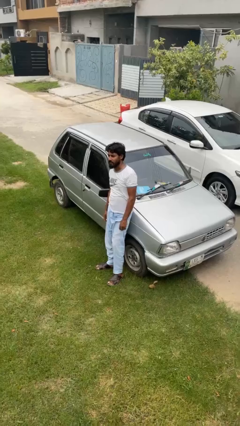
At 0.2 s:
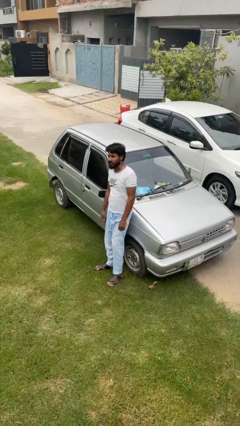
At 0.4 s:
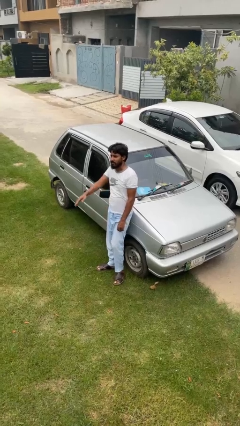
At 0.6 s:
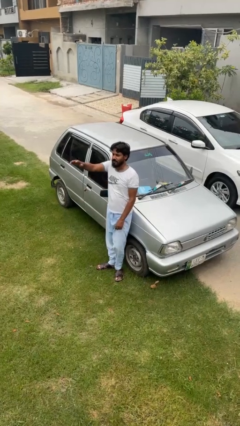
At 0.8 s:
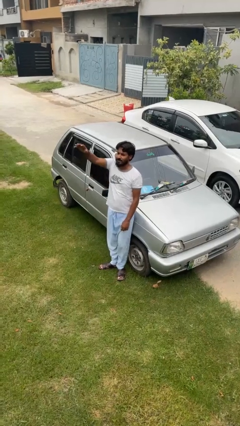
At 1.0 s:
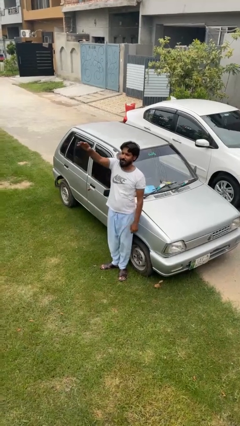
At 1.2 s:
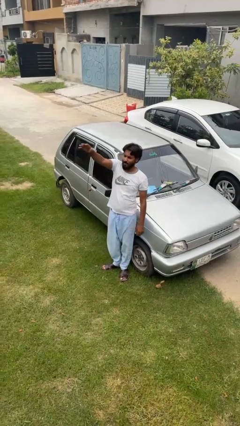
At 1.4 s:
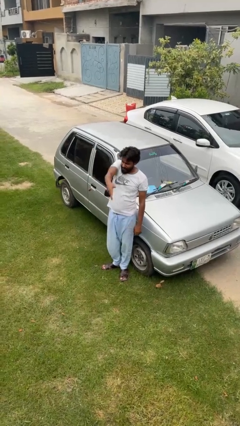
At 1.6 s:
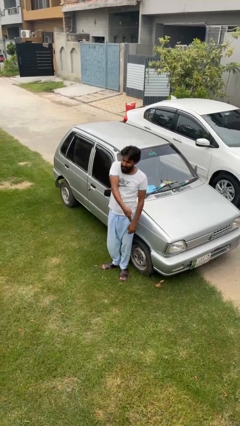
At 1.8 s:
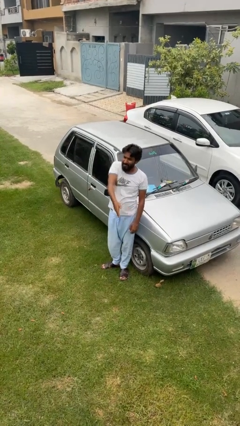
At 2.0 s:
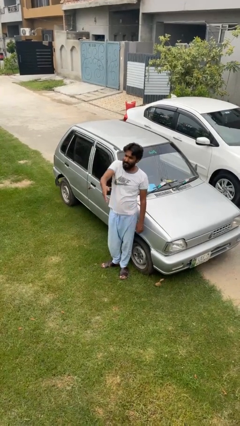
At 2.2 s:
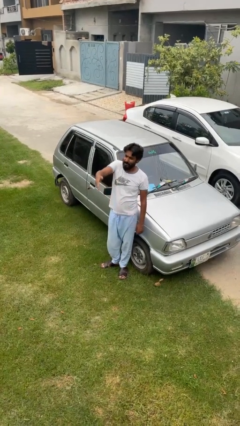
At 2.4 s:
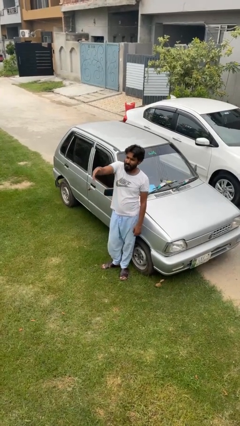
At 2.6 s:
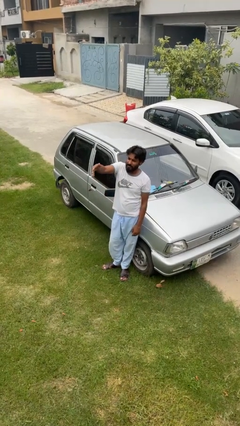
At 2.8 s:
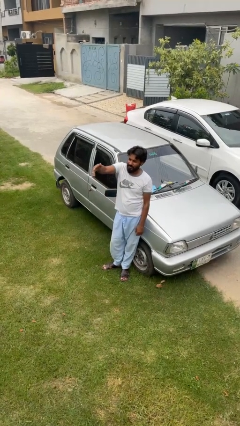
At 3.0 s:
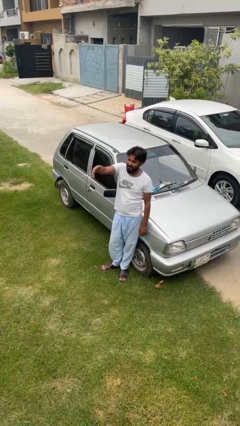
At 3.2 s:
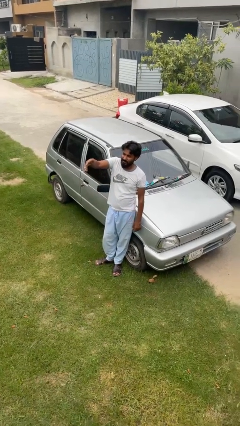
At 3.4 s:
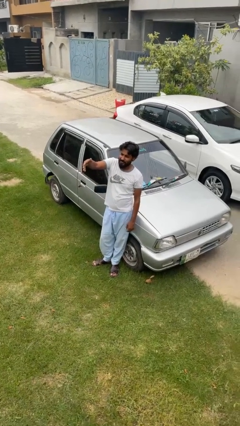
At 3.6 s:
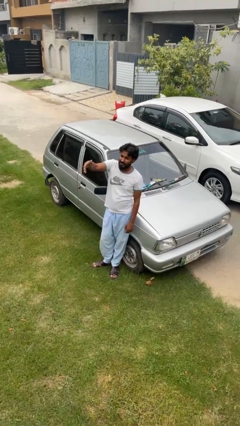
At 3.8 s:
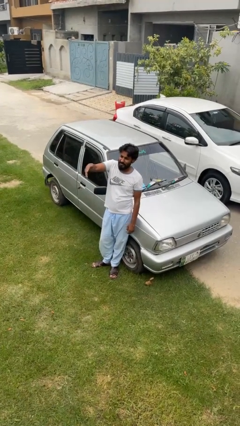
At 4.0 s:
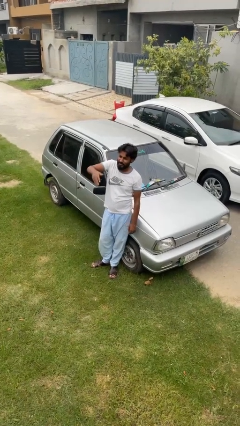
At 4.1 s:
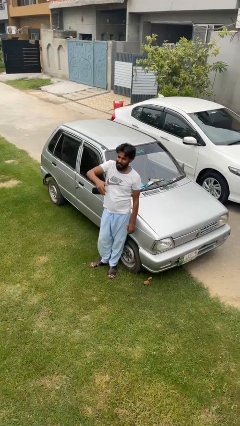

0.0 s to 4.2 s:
person gestures come here

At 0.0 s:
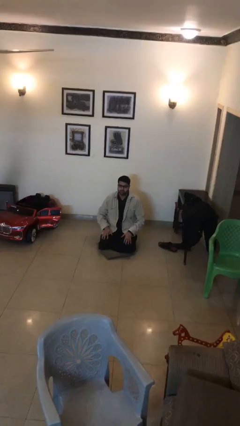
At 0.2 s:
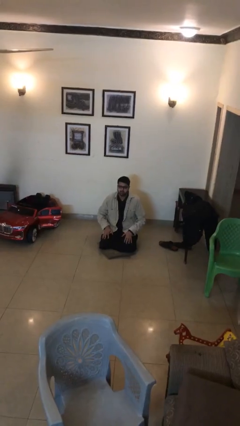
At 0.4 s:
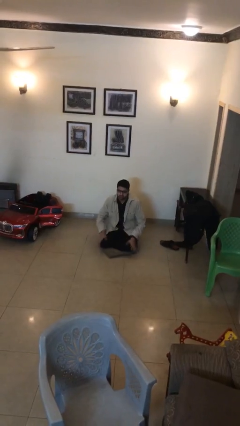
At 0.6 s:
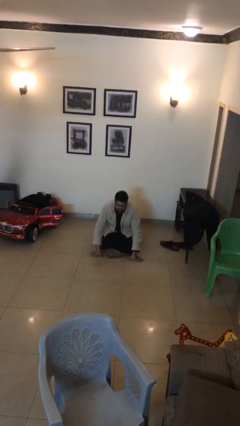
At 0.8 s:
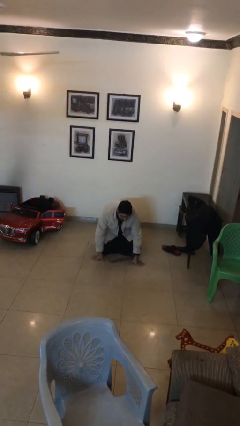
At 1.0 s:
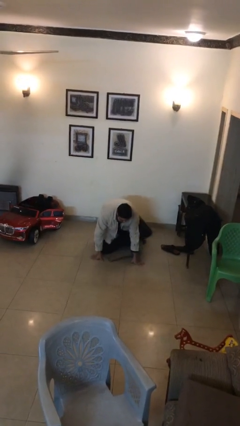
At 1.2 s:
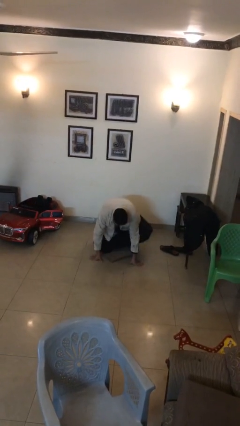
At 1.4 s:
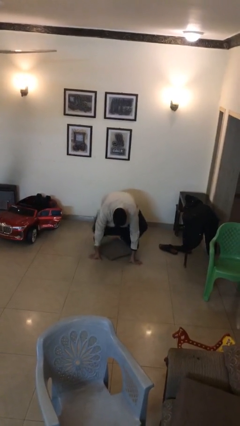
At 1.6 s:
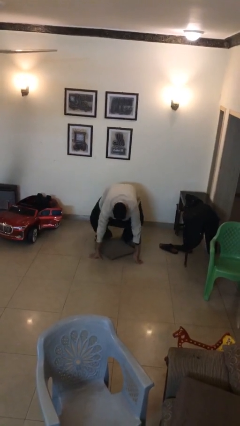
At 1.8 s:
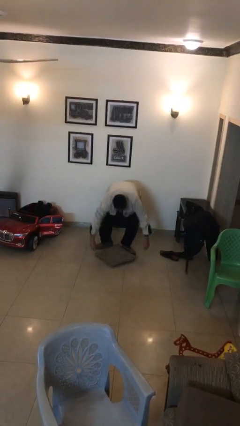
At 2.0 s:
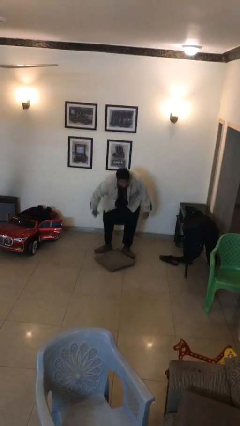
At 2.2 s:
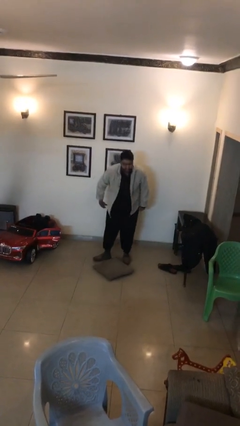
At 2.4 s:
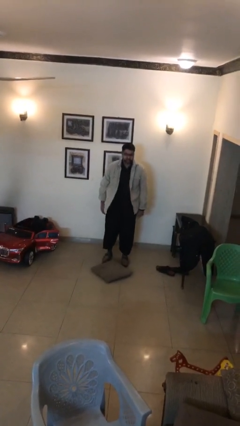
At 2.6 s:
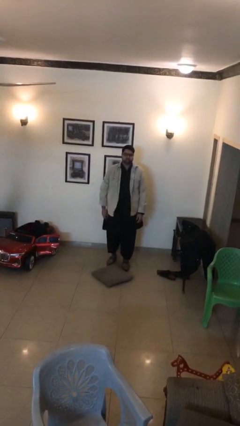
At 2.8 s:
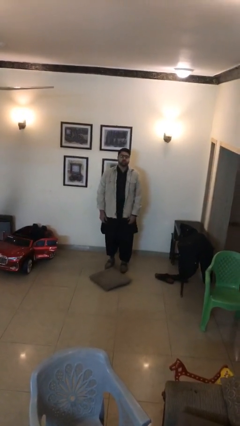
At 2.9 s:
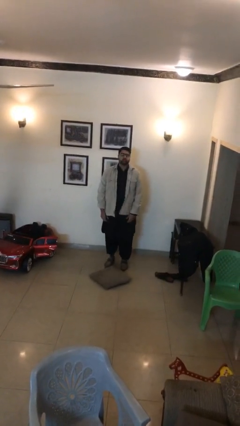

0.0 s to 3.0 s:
person stands up

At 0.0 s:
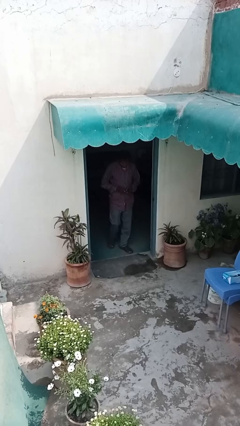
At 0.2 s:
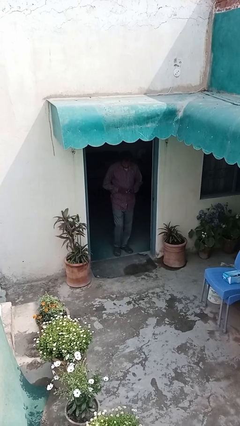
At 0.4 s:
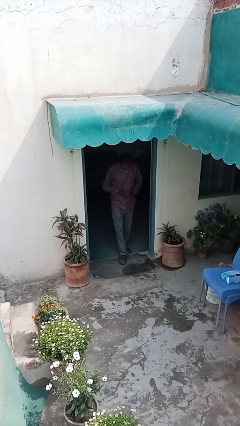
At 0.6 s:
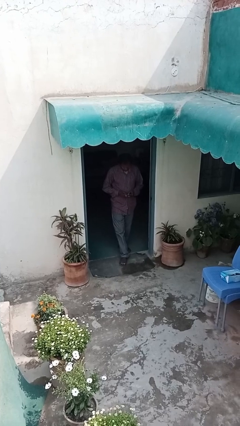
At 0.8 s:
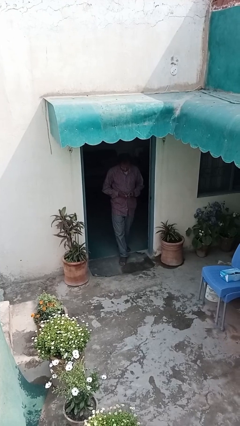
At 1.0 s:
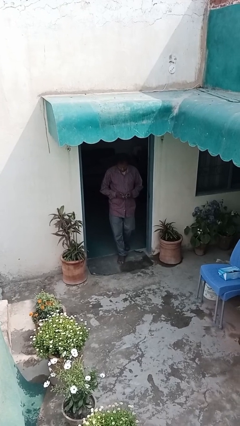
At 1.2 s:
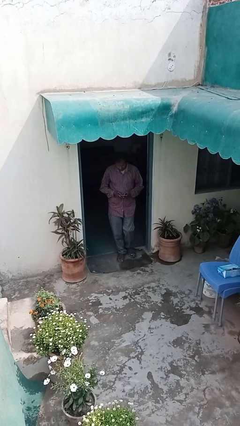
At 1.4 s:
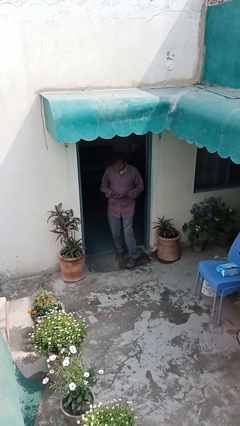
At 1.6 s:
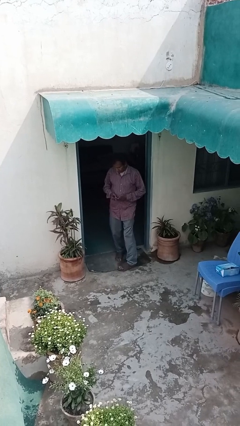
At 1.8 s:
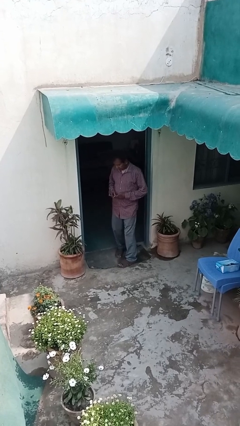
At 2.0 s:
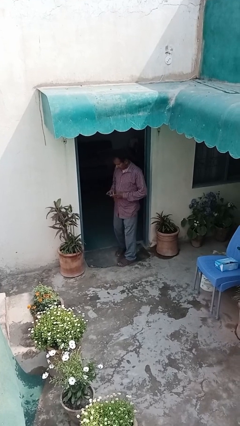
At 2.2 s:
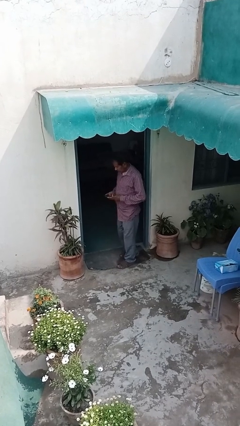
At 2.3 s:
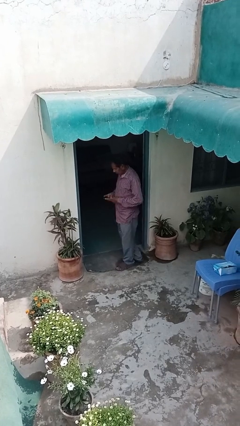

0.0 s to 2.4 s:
person enters scene through structure

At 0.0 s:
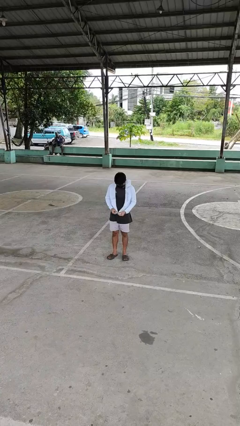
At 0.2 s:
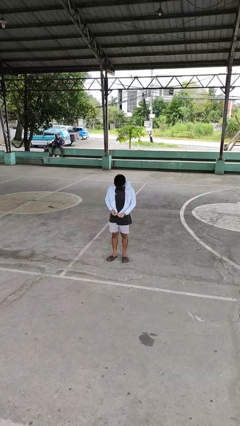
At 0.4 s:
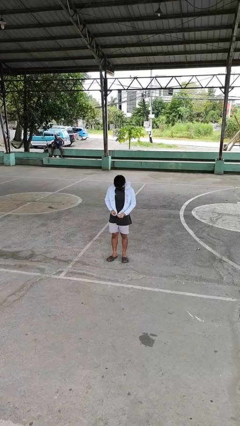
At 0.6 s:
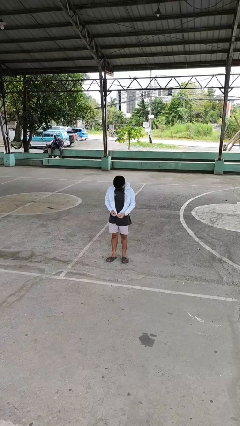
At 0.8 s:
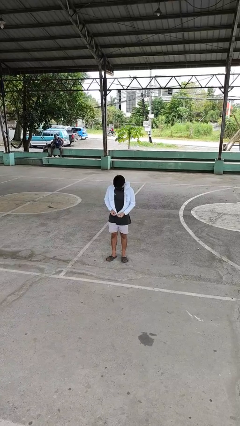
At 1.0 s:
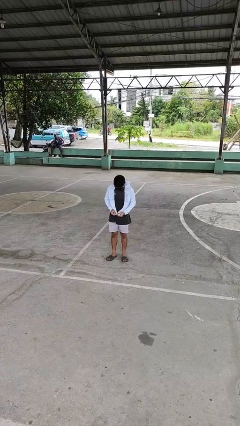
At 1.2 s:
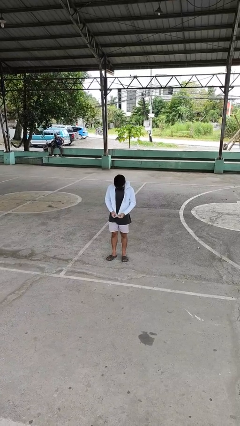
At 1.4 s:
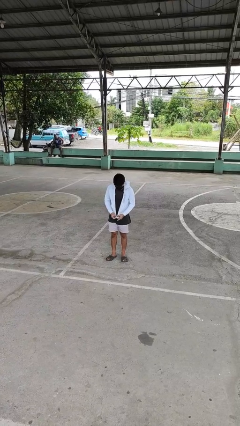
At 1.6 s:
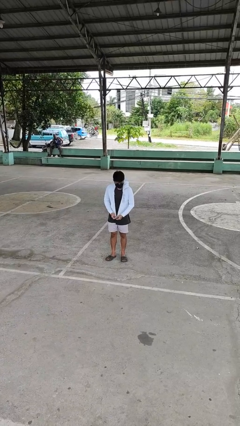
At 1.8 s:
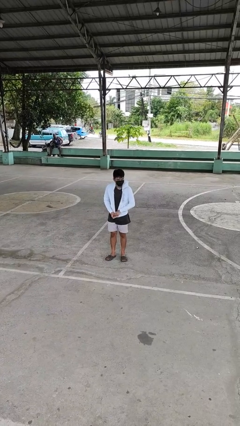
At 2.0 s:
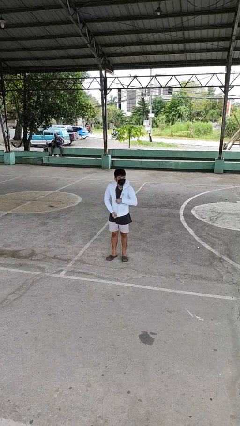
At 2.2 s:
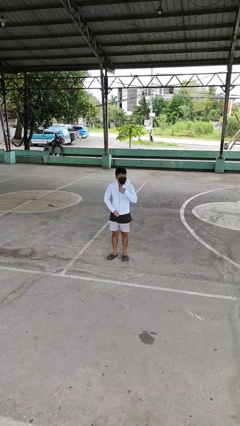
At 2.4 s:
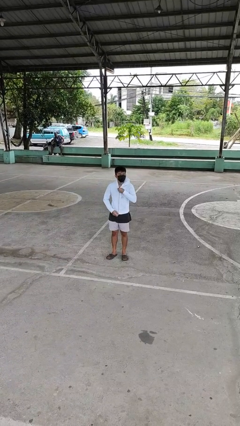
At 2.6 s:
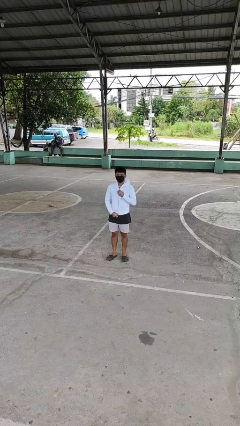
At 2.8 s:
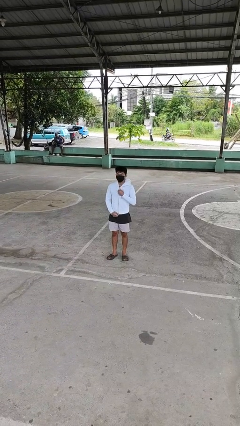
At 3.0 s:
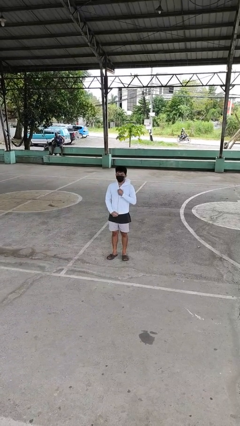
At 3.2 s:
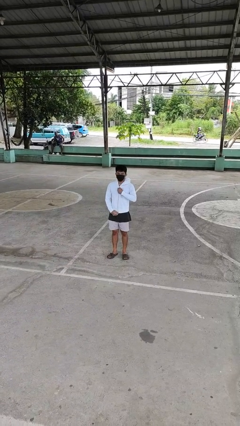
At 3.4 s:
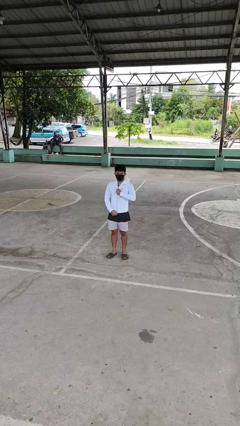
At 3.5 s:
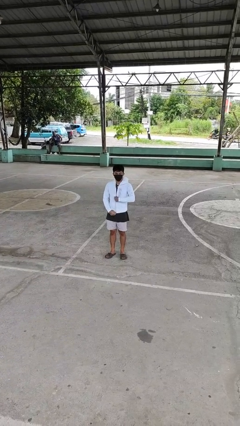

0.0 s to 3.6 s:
person zips up jacket

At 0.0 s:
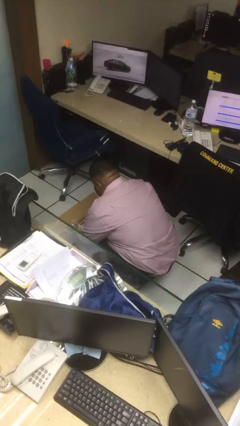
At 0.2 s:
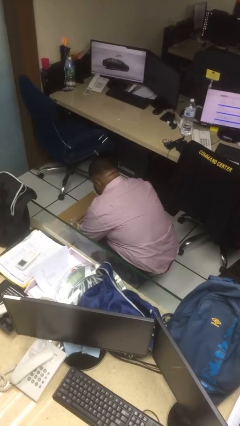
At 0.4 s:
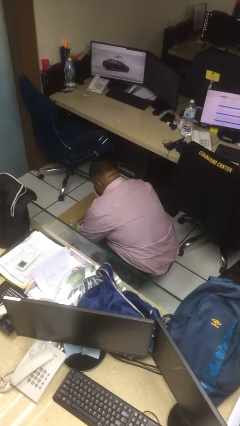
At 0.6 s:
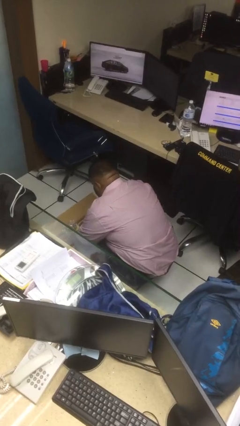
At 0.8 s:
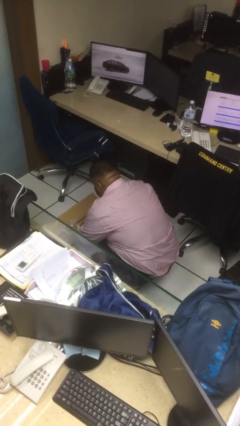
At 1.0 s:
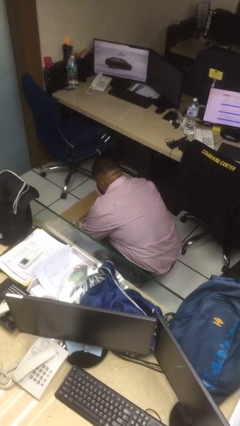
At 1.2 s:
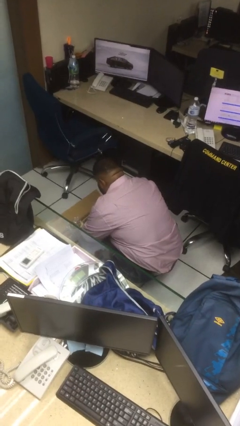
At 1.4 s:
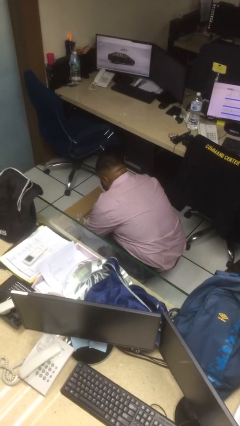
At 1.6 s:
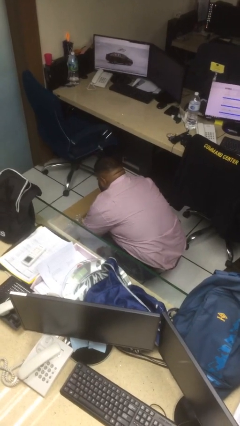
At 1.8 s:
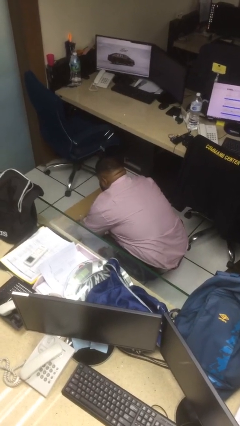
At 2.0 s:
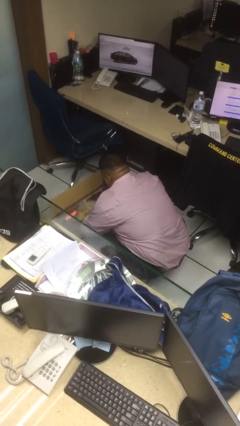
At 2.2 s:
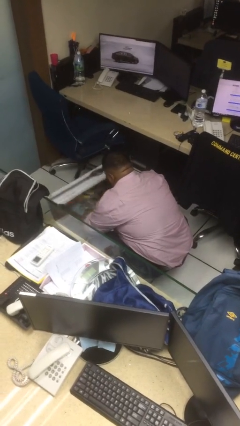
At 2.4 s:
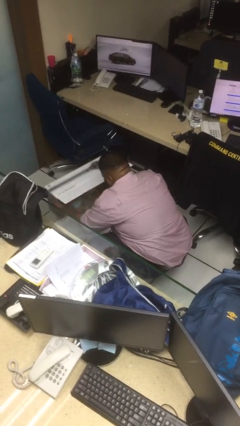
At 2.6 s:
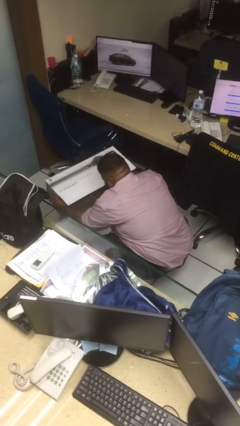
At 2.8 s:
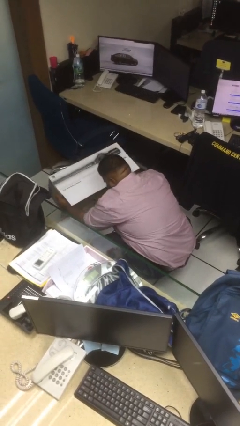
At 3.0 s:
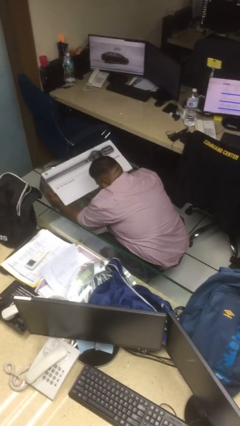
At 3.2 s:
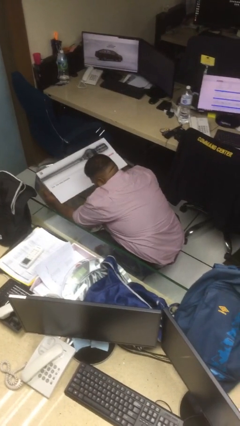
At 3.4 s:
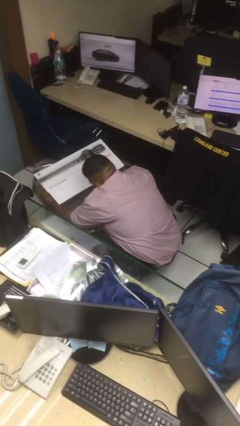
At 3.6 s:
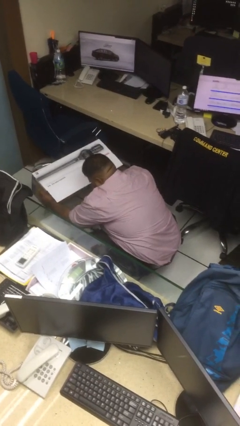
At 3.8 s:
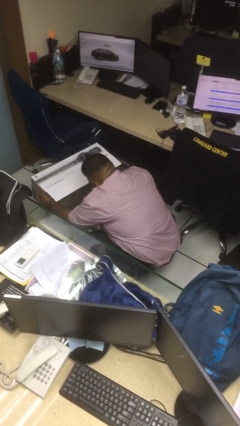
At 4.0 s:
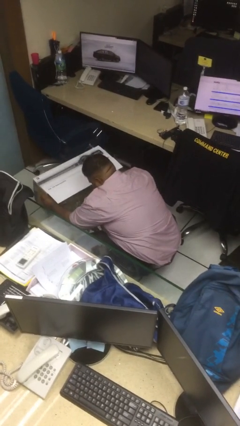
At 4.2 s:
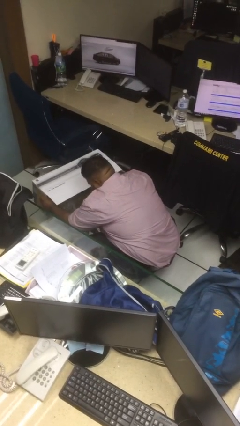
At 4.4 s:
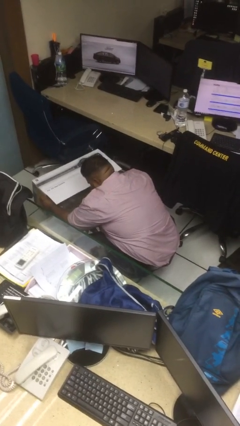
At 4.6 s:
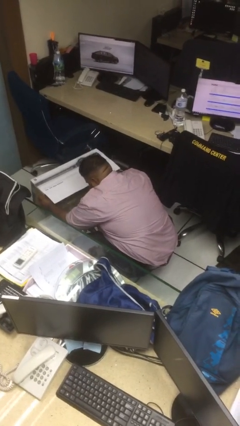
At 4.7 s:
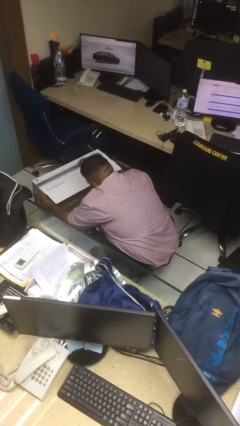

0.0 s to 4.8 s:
person unloads box onto floor
